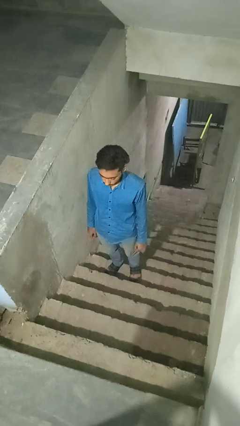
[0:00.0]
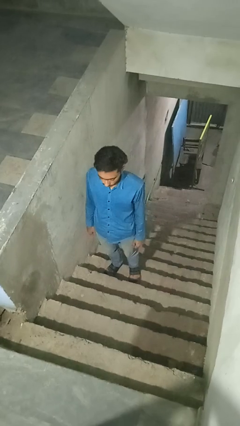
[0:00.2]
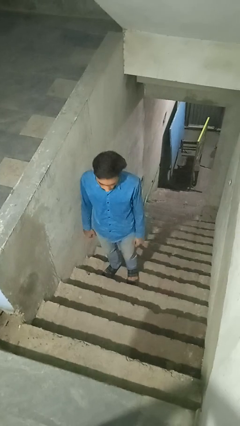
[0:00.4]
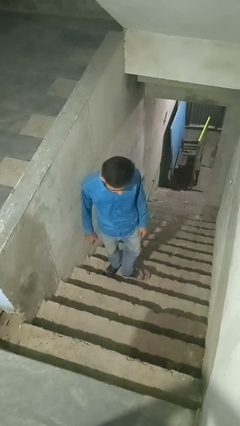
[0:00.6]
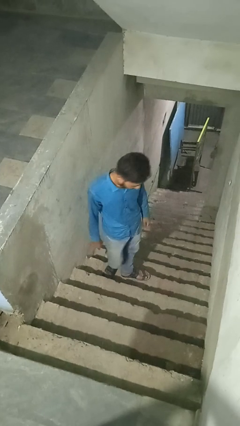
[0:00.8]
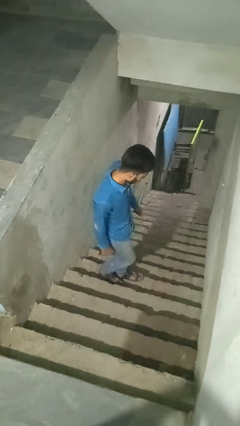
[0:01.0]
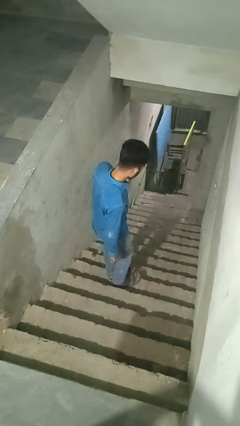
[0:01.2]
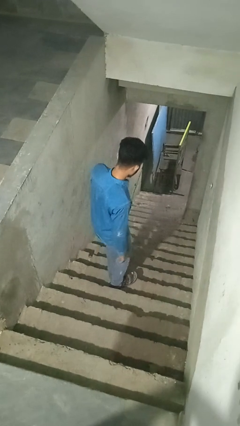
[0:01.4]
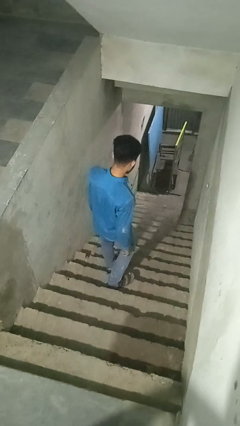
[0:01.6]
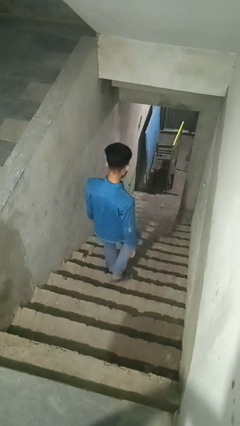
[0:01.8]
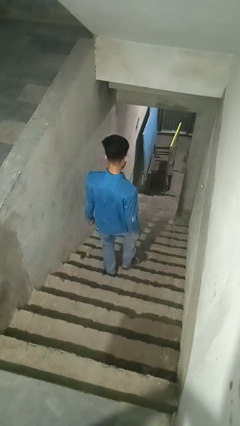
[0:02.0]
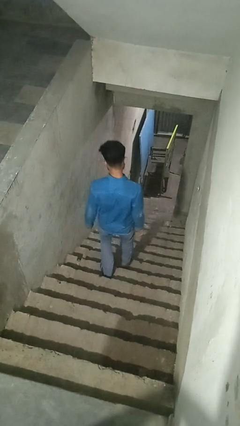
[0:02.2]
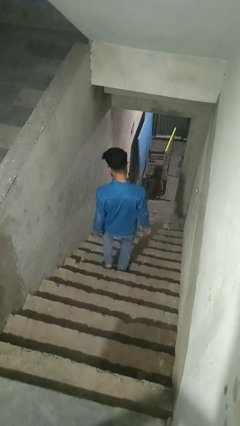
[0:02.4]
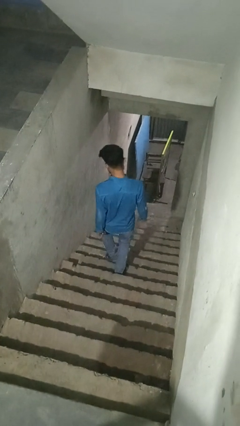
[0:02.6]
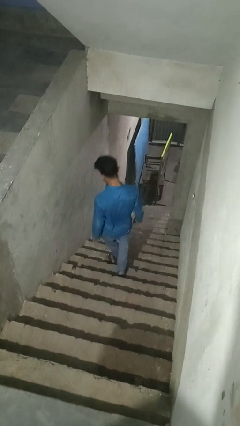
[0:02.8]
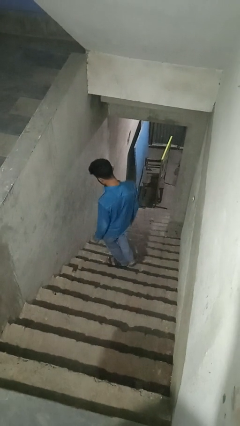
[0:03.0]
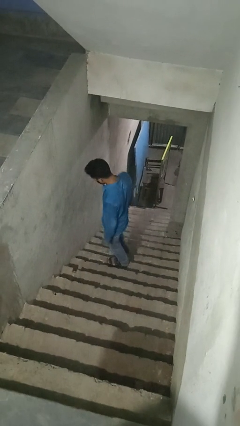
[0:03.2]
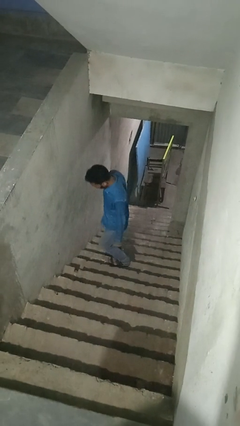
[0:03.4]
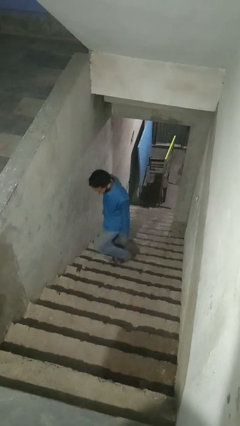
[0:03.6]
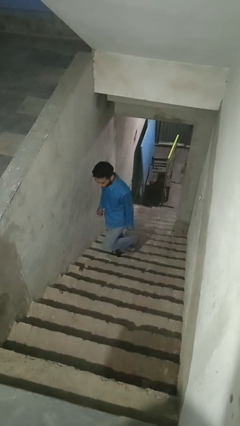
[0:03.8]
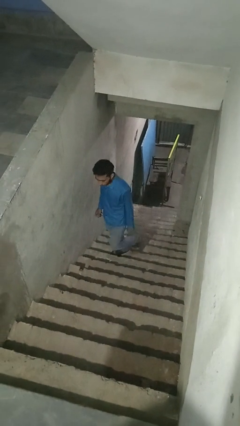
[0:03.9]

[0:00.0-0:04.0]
person climbs down stairs

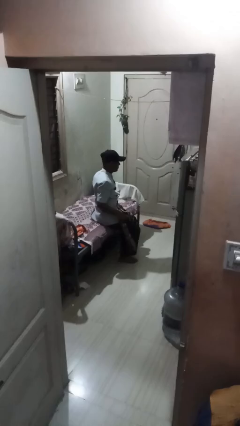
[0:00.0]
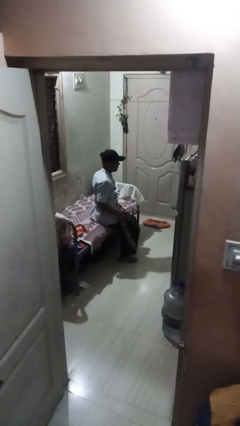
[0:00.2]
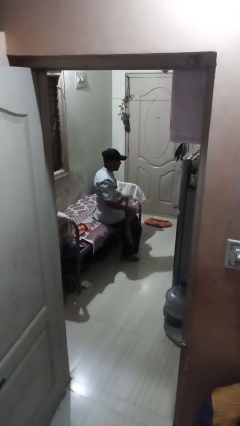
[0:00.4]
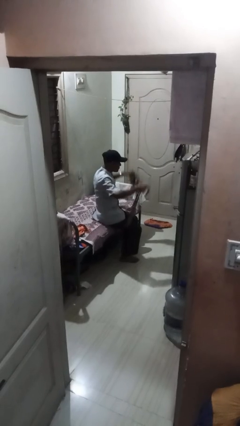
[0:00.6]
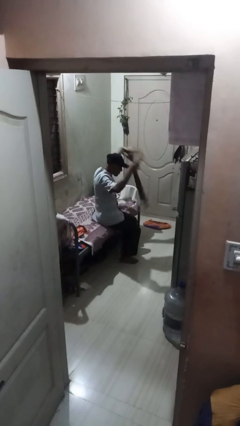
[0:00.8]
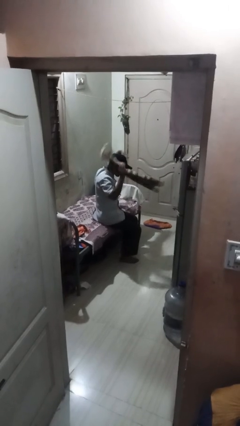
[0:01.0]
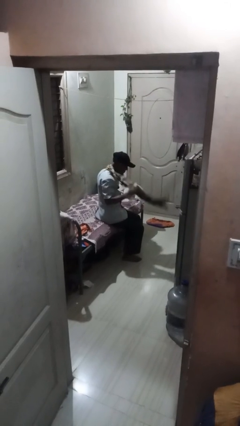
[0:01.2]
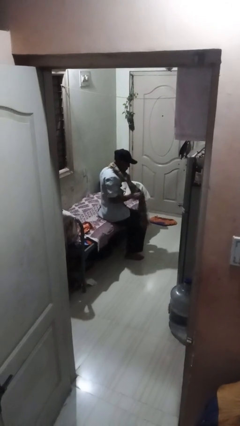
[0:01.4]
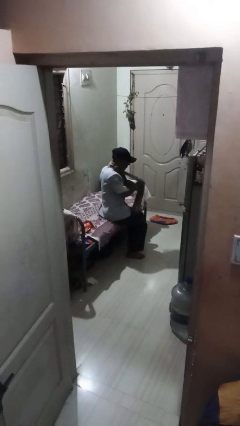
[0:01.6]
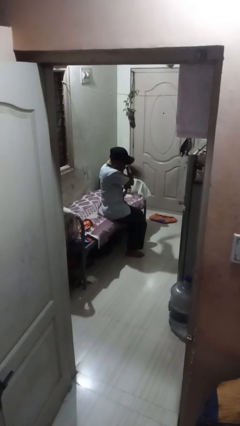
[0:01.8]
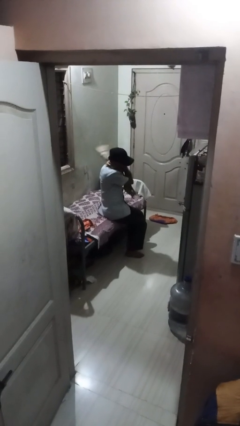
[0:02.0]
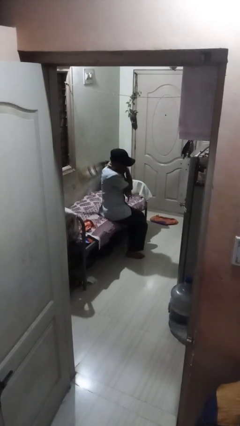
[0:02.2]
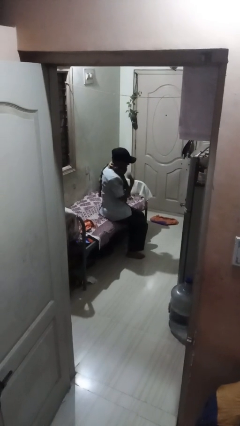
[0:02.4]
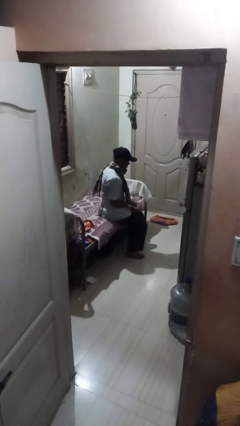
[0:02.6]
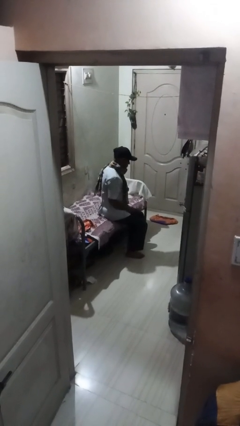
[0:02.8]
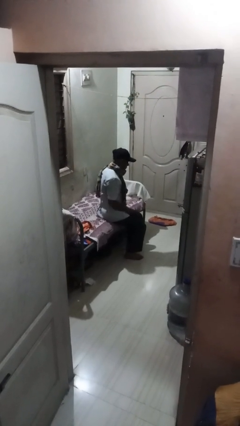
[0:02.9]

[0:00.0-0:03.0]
person puts on scarf

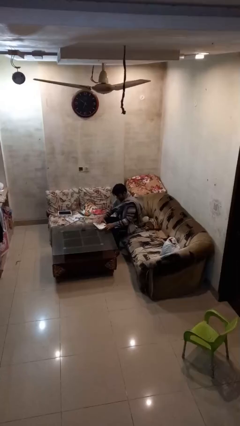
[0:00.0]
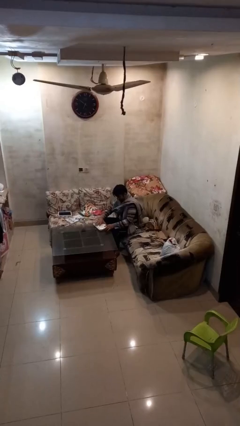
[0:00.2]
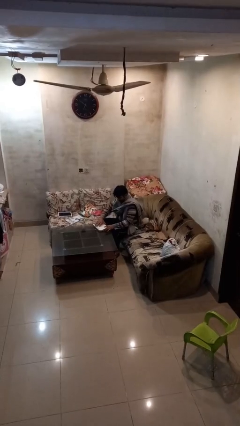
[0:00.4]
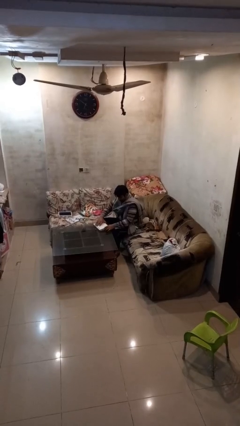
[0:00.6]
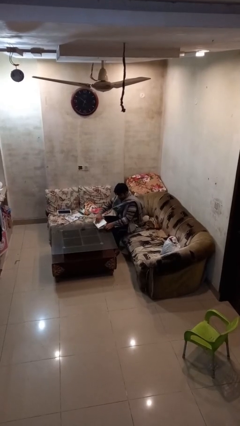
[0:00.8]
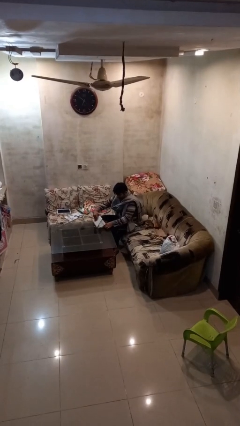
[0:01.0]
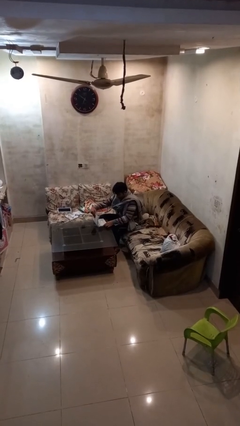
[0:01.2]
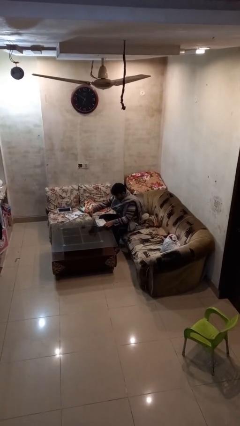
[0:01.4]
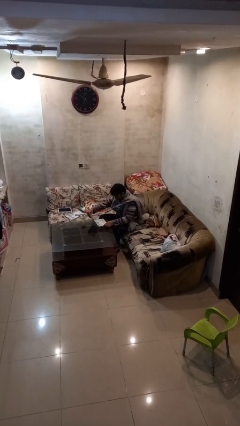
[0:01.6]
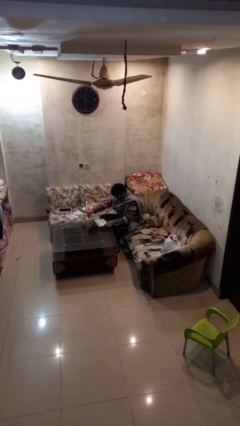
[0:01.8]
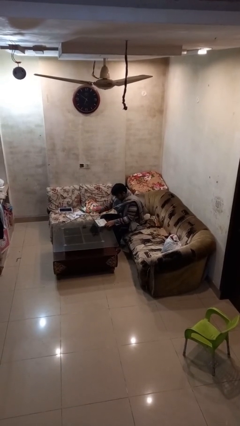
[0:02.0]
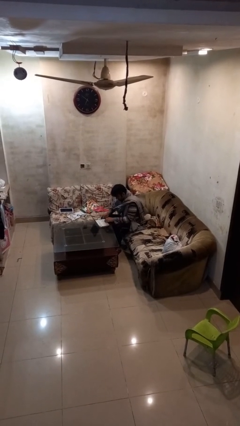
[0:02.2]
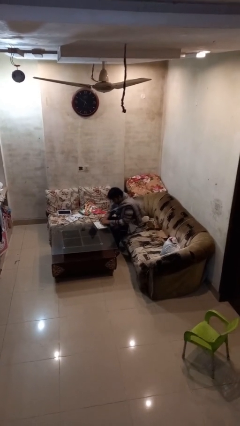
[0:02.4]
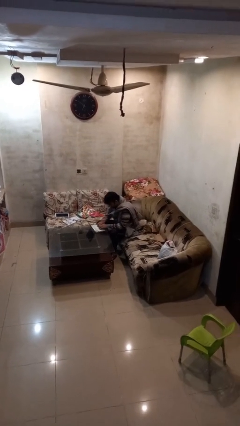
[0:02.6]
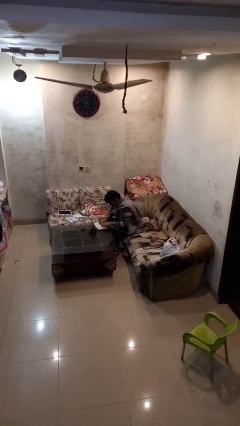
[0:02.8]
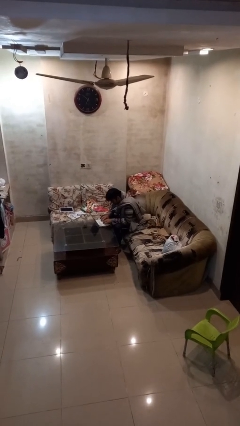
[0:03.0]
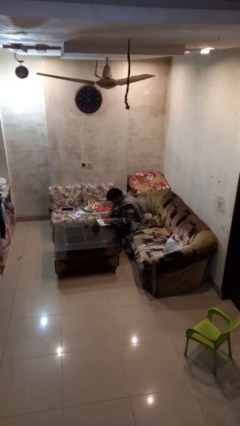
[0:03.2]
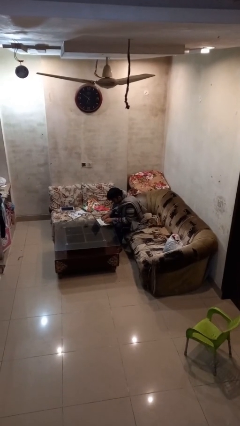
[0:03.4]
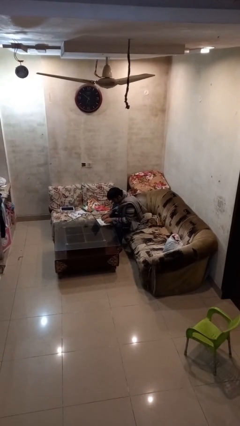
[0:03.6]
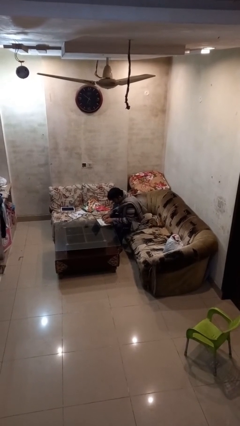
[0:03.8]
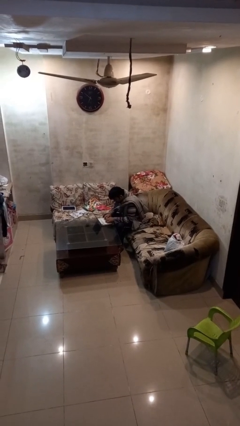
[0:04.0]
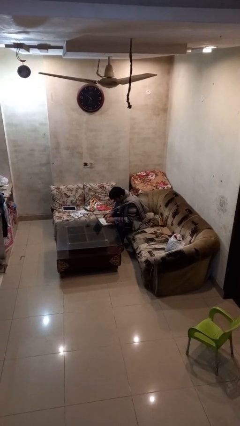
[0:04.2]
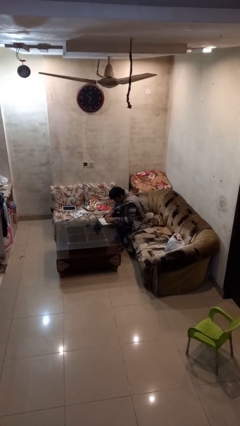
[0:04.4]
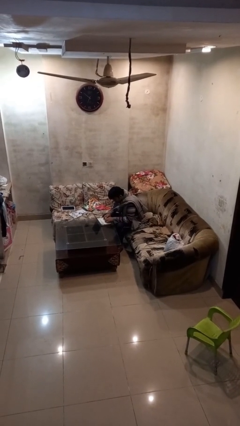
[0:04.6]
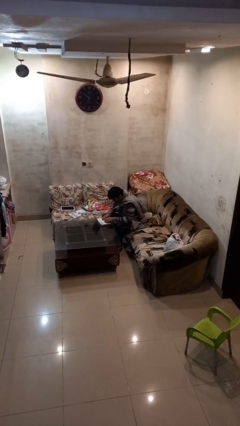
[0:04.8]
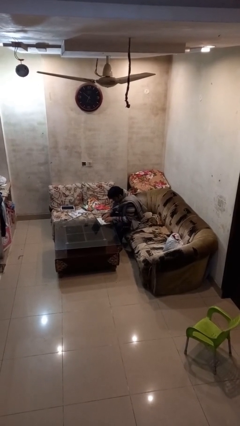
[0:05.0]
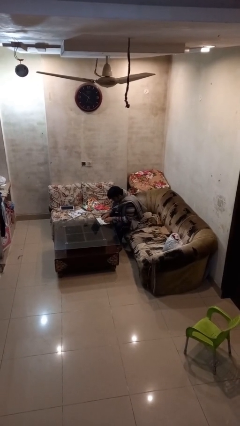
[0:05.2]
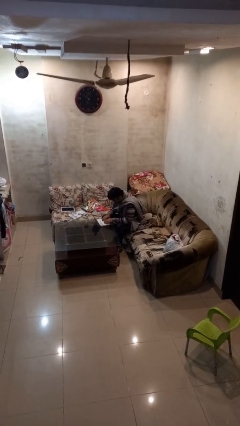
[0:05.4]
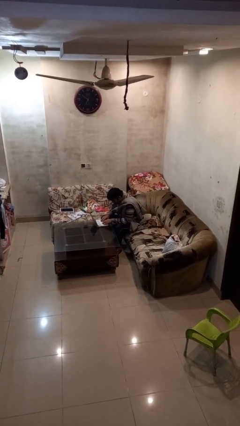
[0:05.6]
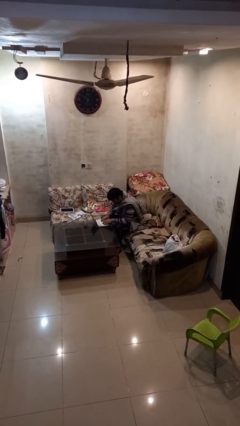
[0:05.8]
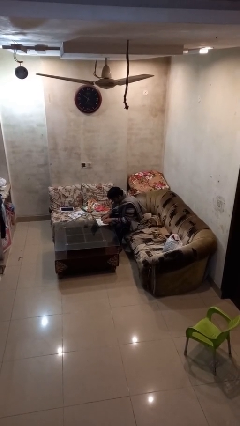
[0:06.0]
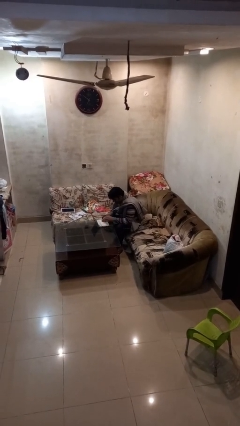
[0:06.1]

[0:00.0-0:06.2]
person interacts with laptop

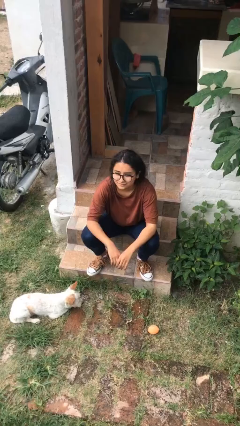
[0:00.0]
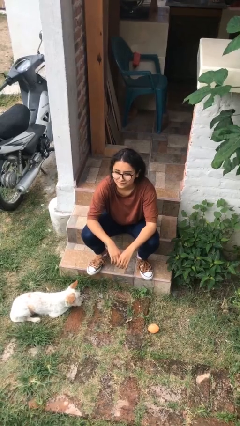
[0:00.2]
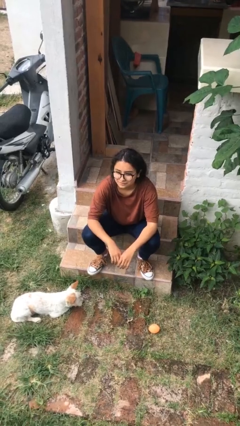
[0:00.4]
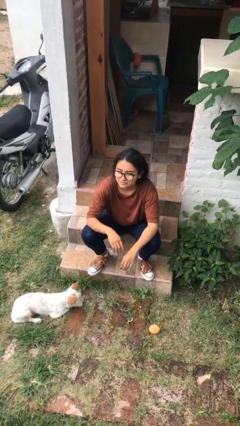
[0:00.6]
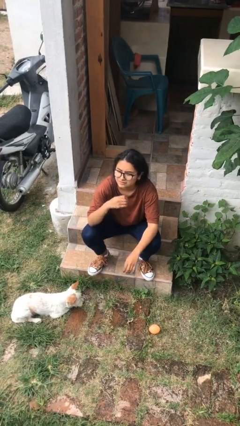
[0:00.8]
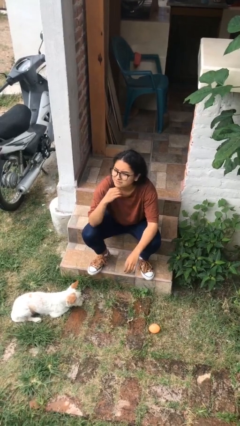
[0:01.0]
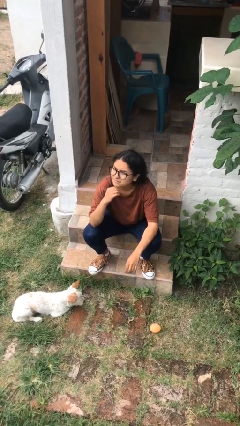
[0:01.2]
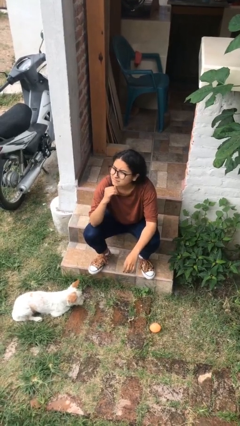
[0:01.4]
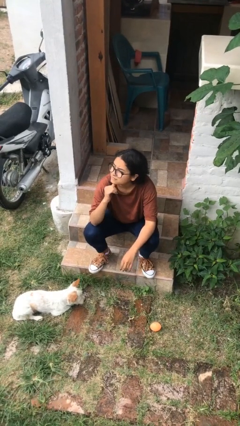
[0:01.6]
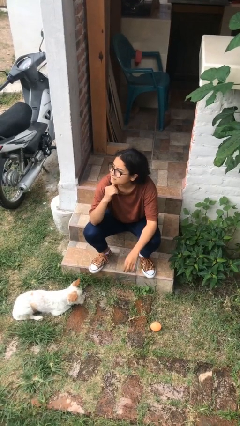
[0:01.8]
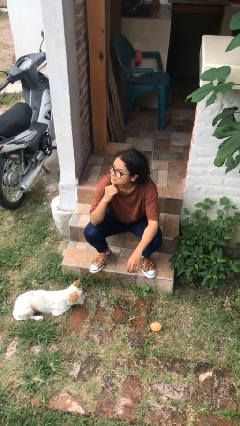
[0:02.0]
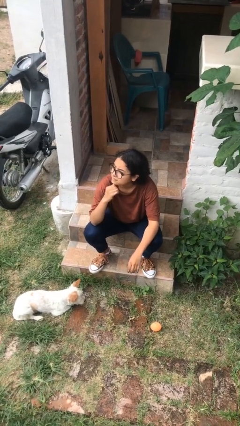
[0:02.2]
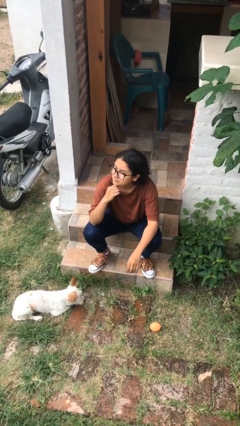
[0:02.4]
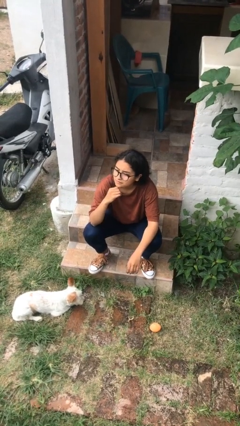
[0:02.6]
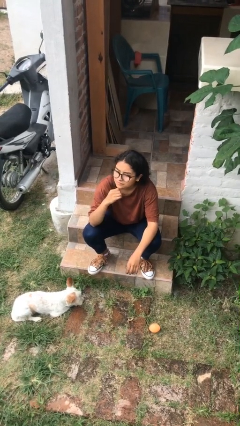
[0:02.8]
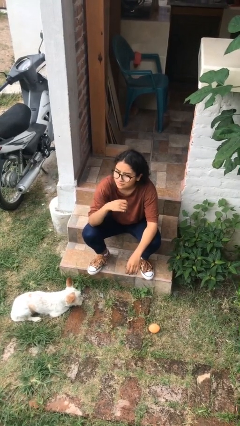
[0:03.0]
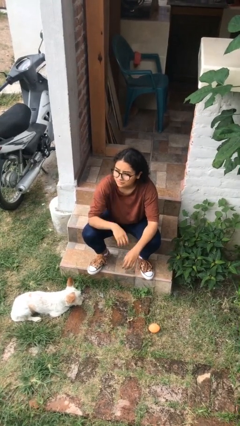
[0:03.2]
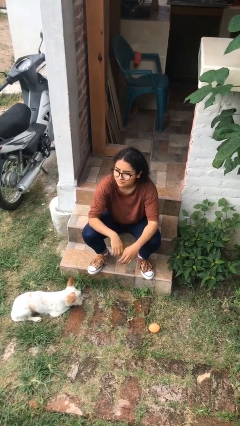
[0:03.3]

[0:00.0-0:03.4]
person strokes chin

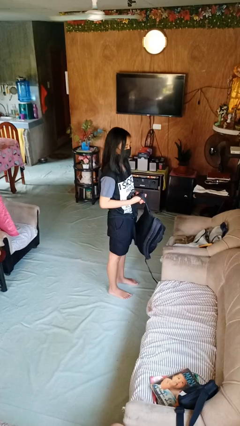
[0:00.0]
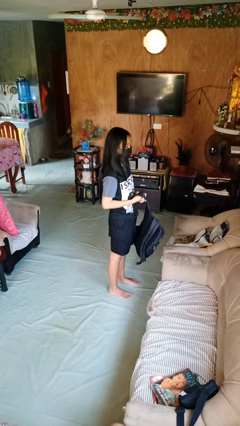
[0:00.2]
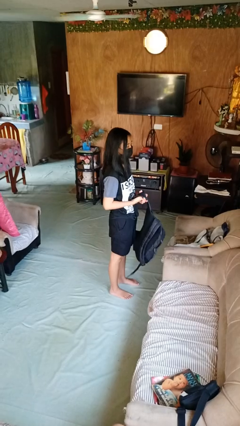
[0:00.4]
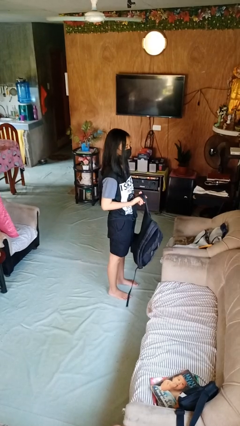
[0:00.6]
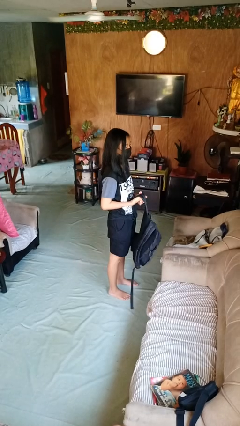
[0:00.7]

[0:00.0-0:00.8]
person takes off backpack

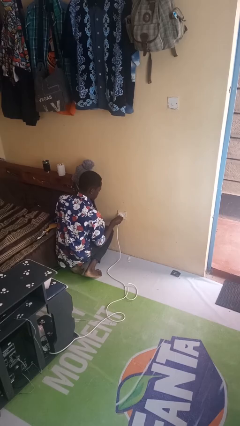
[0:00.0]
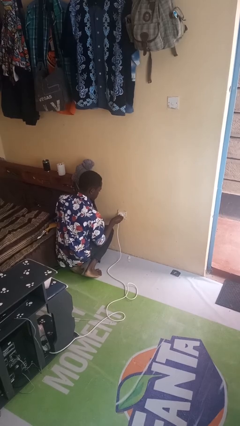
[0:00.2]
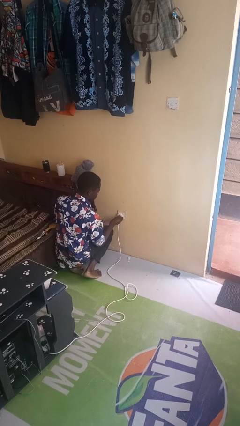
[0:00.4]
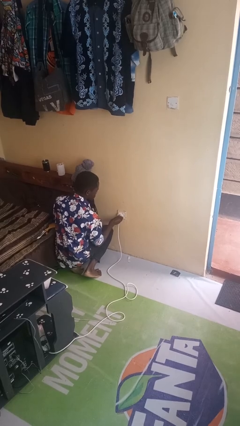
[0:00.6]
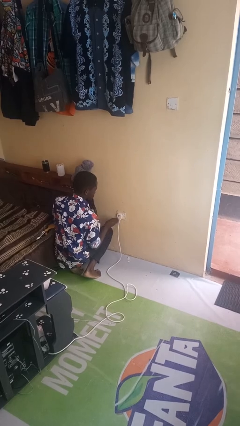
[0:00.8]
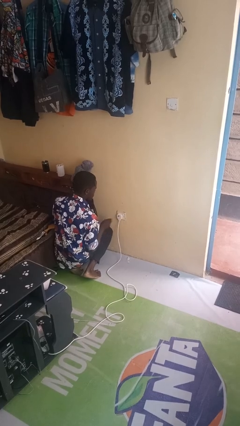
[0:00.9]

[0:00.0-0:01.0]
person plugs into electrical socket
